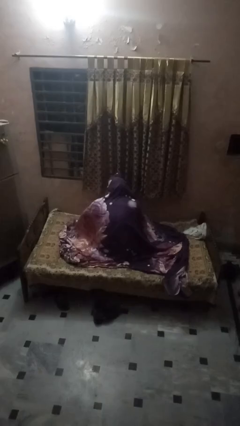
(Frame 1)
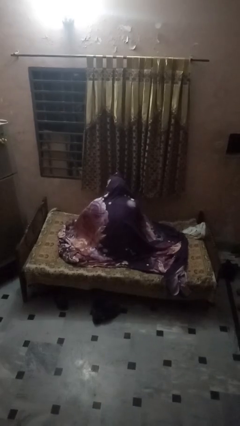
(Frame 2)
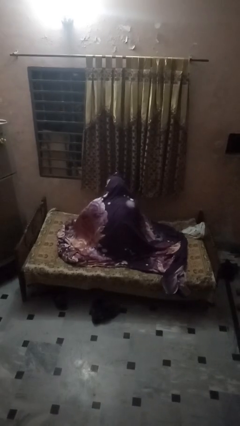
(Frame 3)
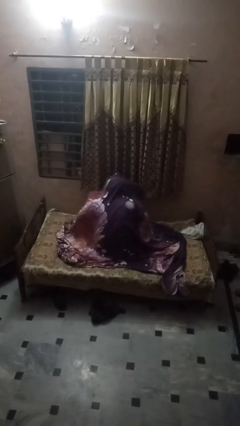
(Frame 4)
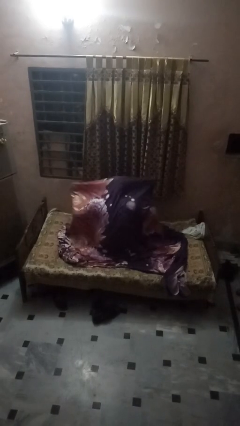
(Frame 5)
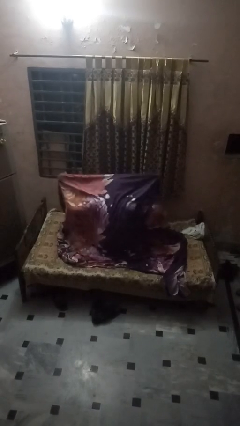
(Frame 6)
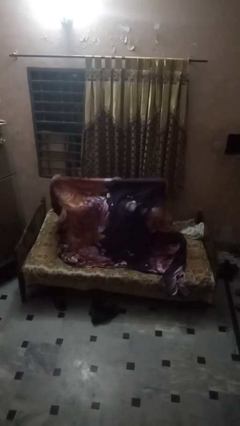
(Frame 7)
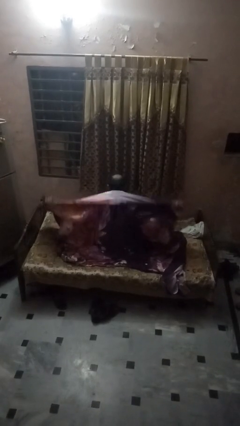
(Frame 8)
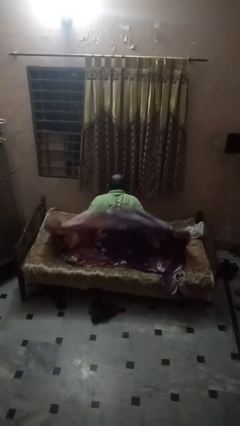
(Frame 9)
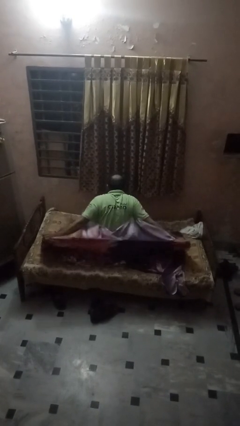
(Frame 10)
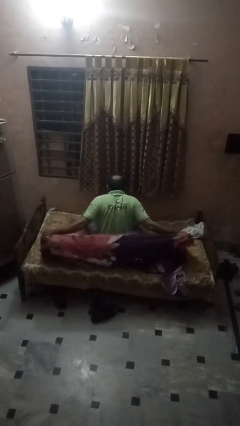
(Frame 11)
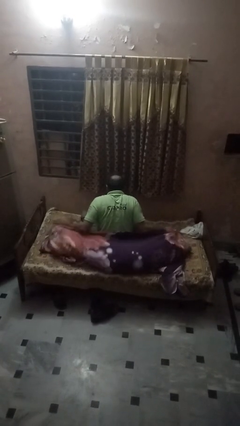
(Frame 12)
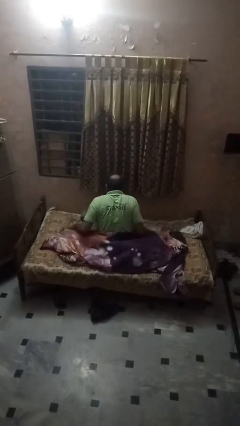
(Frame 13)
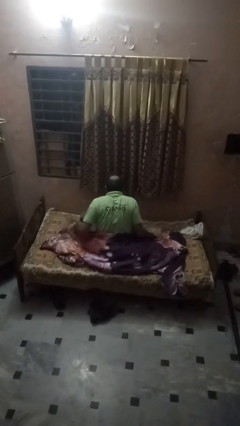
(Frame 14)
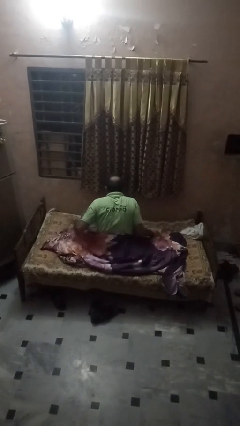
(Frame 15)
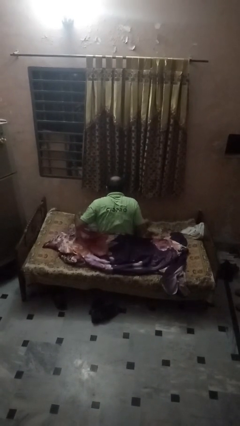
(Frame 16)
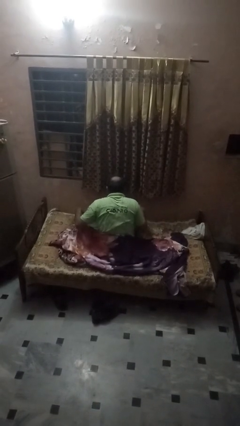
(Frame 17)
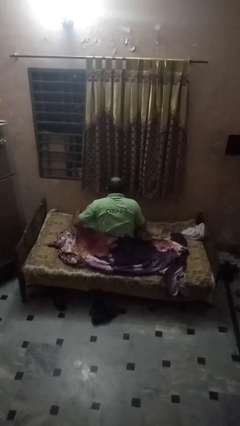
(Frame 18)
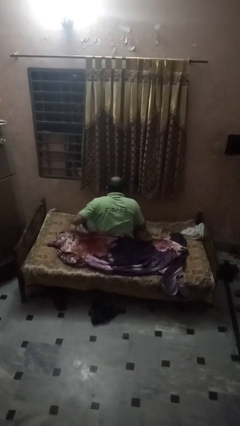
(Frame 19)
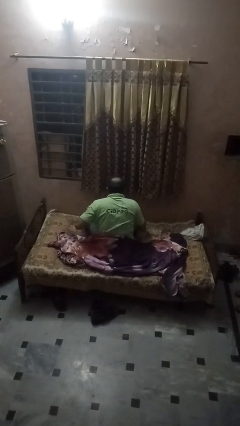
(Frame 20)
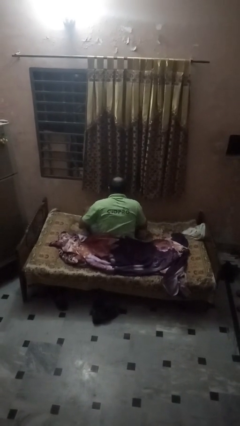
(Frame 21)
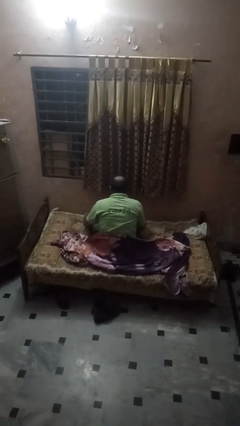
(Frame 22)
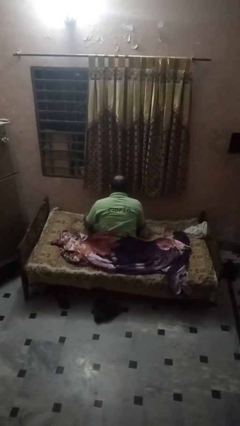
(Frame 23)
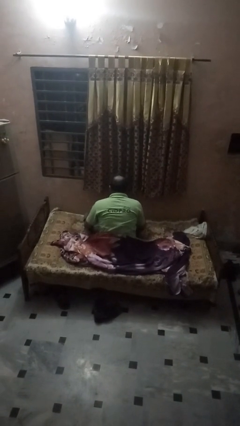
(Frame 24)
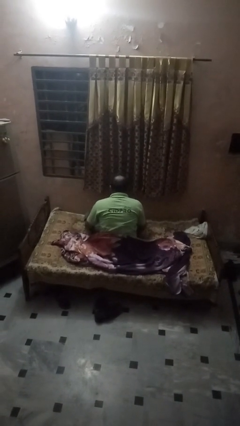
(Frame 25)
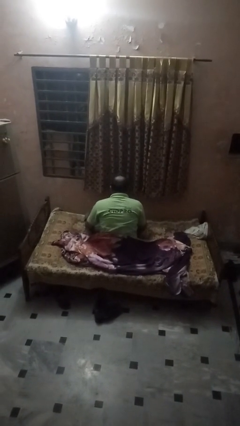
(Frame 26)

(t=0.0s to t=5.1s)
person uncovers with bedsheets

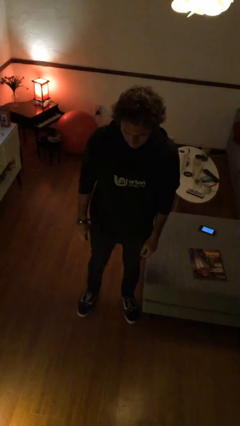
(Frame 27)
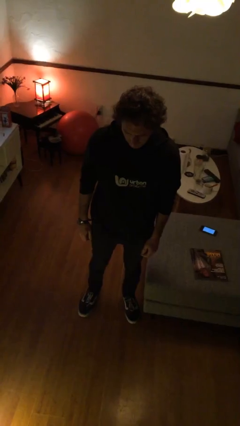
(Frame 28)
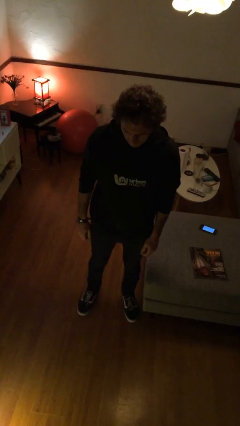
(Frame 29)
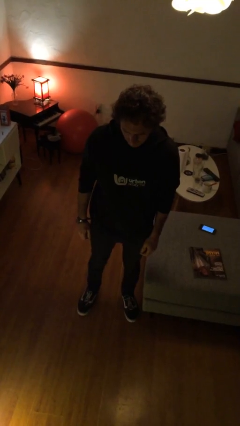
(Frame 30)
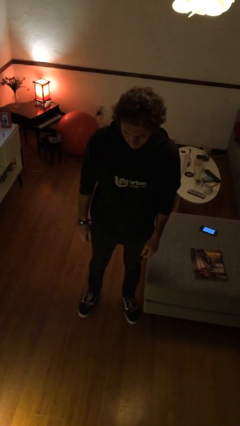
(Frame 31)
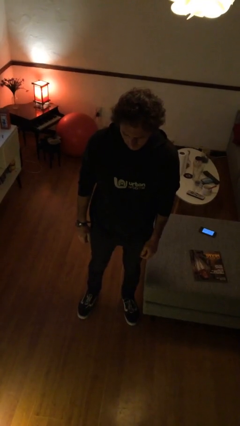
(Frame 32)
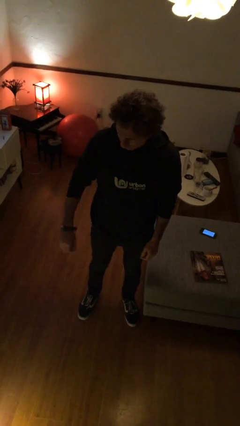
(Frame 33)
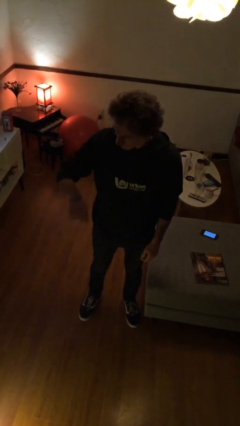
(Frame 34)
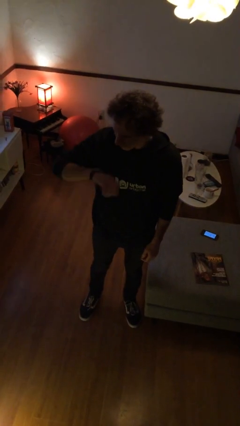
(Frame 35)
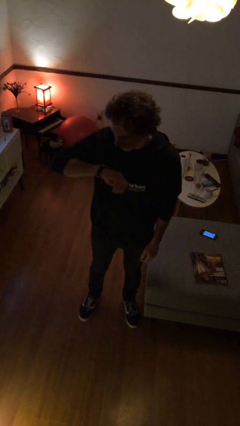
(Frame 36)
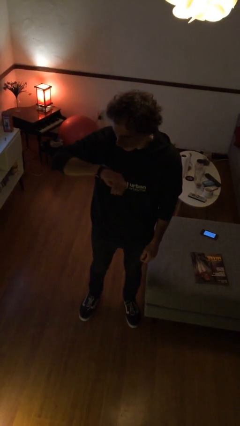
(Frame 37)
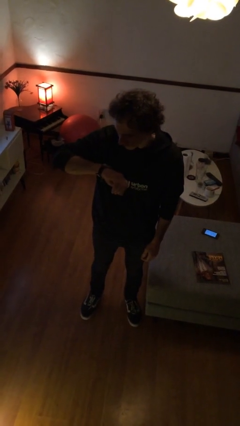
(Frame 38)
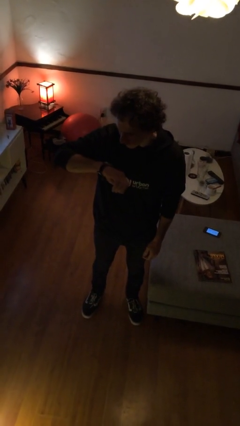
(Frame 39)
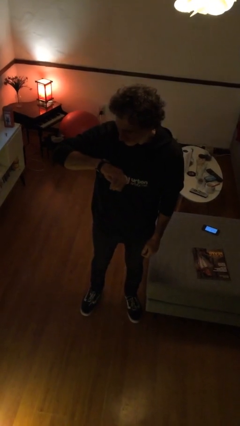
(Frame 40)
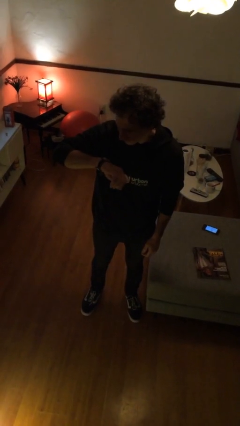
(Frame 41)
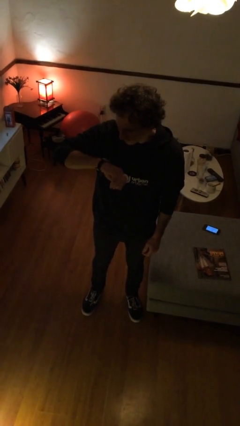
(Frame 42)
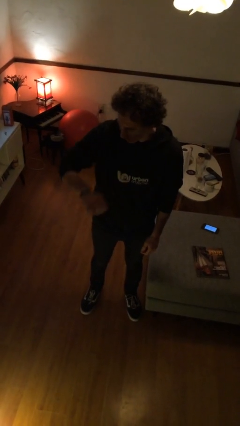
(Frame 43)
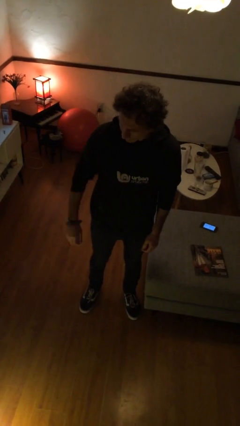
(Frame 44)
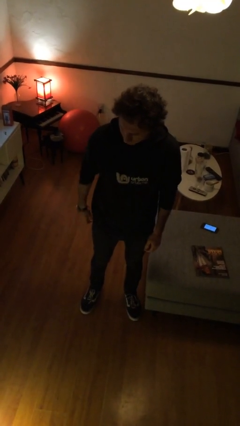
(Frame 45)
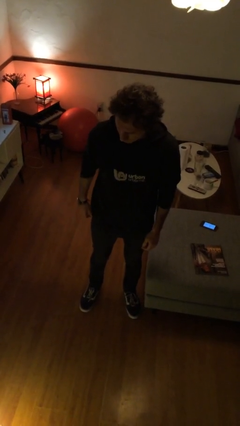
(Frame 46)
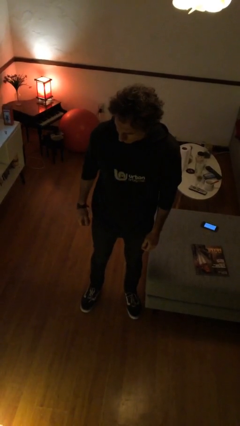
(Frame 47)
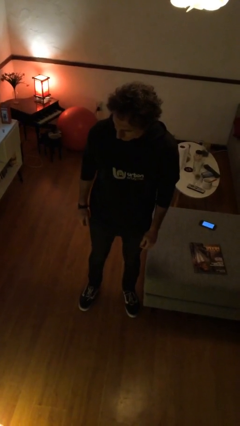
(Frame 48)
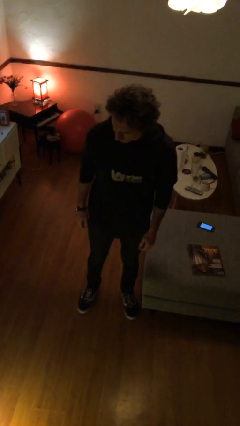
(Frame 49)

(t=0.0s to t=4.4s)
person looks at wristwatch

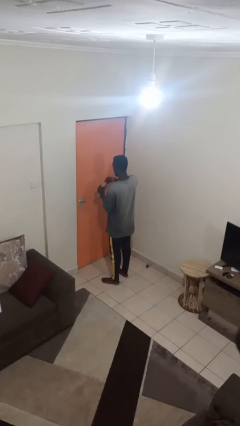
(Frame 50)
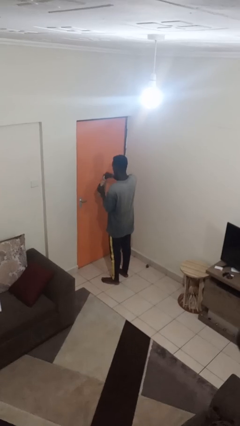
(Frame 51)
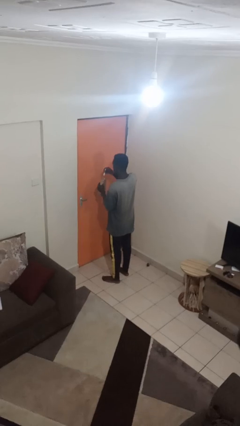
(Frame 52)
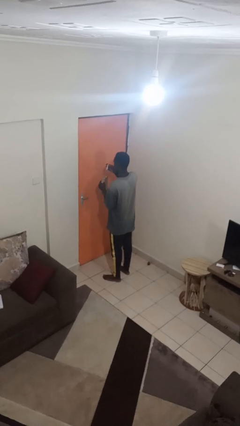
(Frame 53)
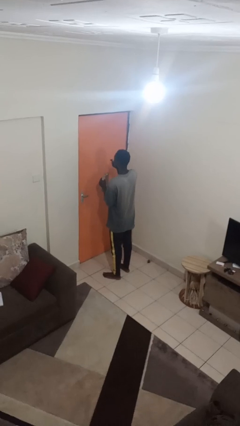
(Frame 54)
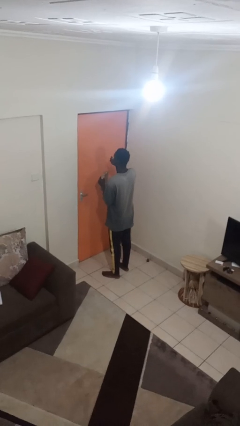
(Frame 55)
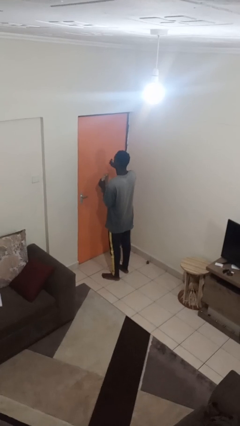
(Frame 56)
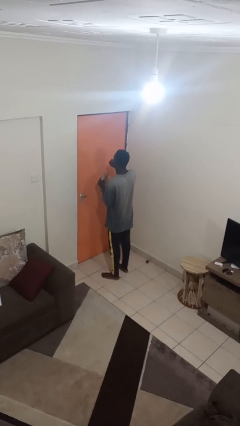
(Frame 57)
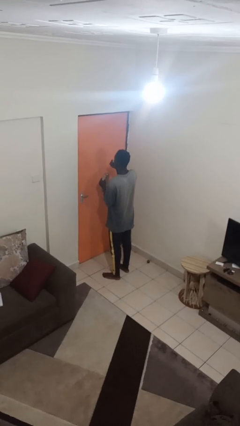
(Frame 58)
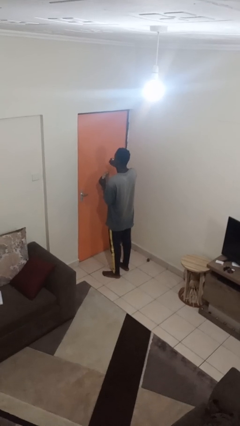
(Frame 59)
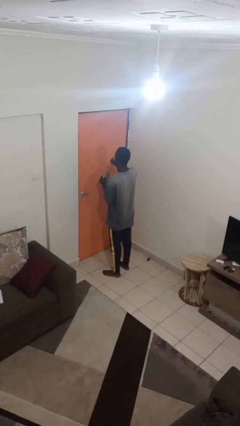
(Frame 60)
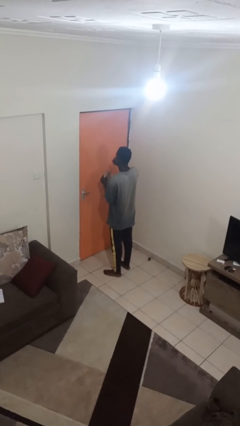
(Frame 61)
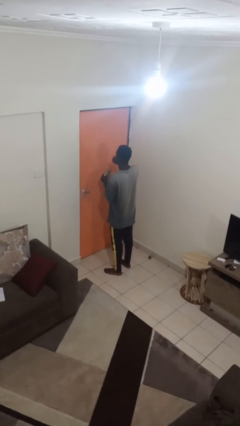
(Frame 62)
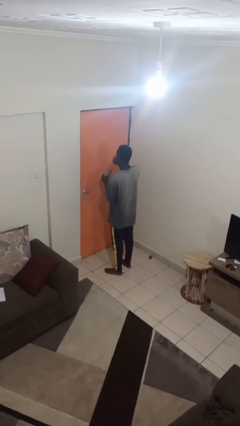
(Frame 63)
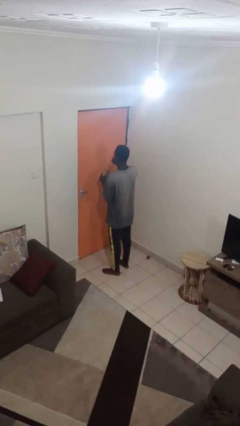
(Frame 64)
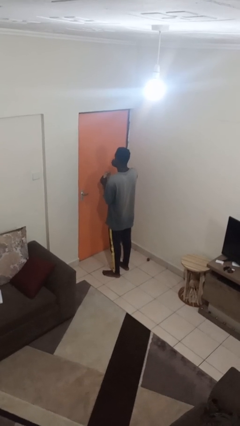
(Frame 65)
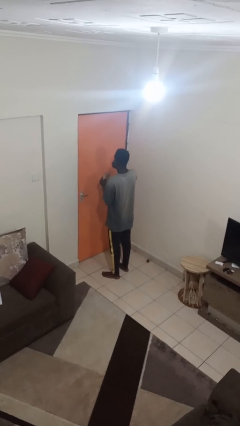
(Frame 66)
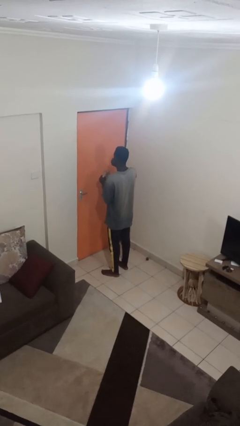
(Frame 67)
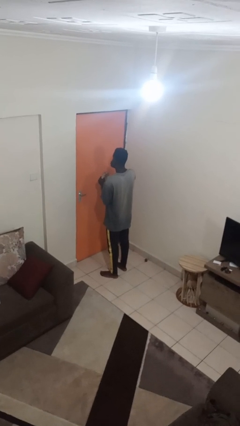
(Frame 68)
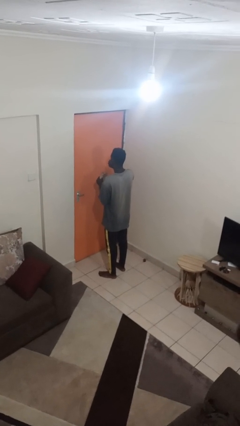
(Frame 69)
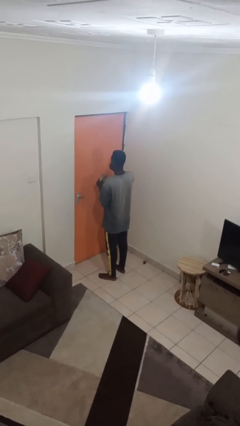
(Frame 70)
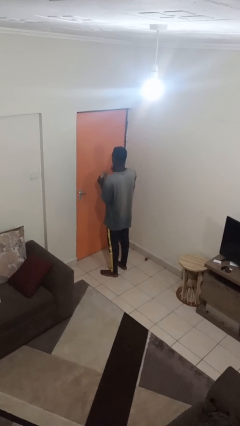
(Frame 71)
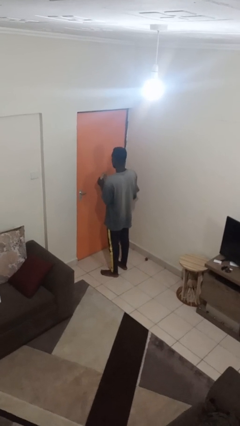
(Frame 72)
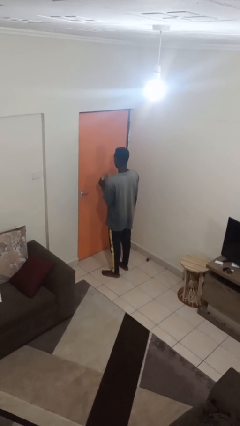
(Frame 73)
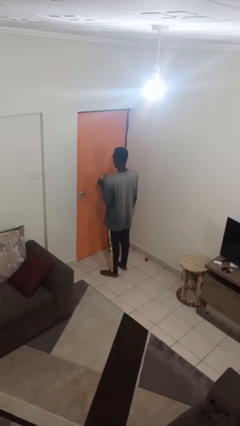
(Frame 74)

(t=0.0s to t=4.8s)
person eats snack from bag

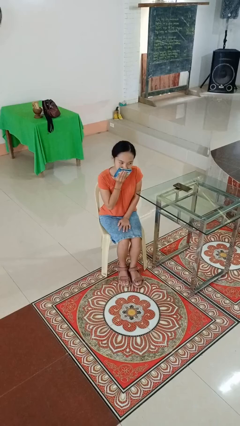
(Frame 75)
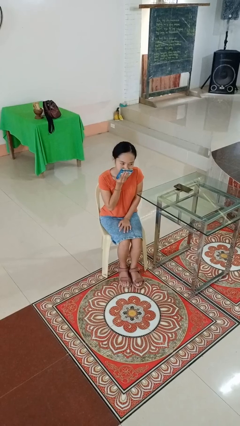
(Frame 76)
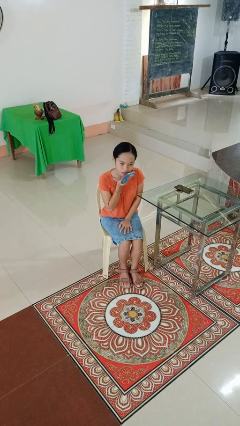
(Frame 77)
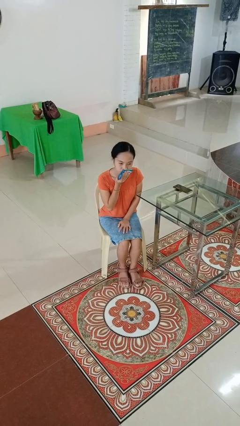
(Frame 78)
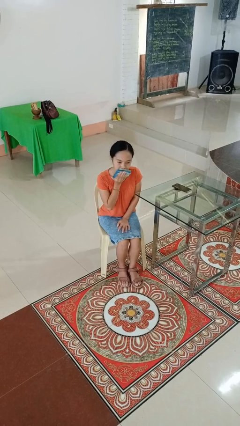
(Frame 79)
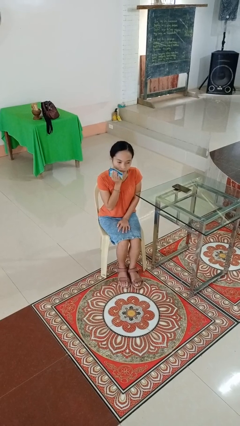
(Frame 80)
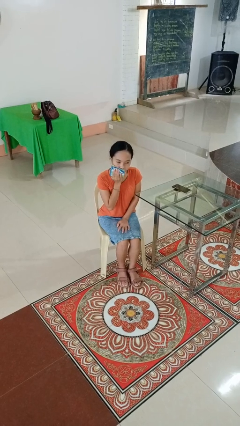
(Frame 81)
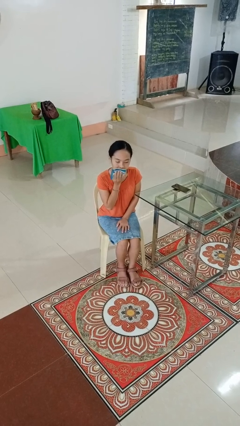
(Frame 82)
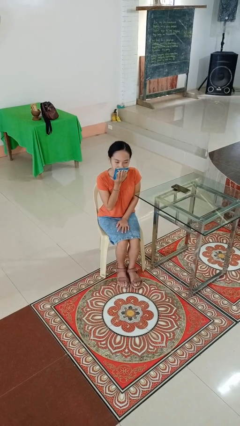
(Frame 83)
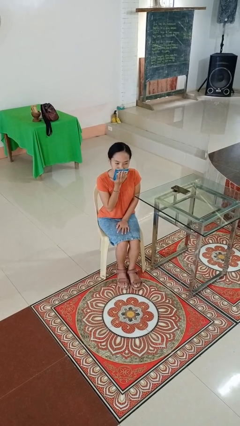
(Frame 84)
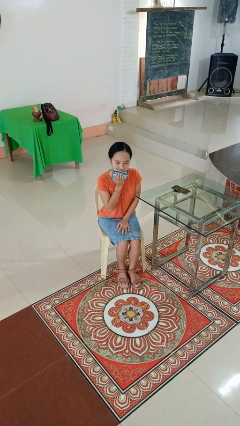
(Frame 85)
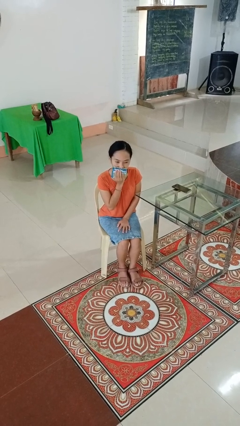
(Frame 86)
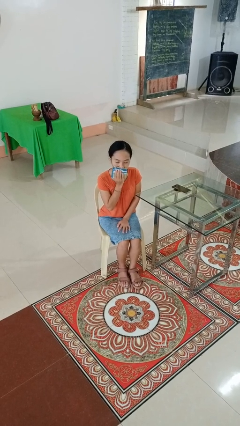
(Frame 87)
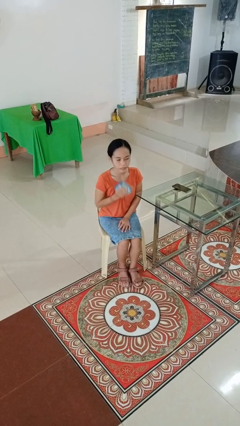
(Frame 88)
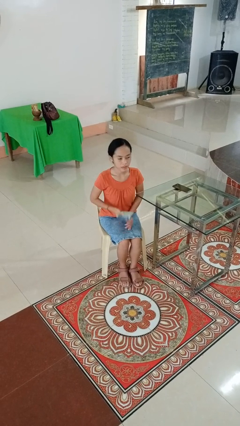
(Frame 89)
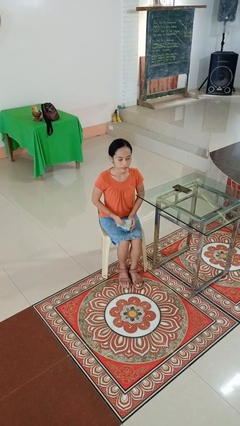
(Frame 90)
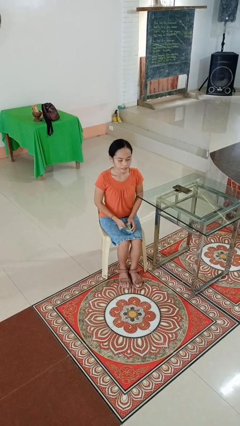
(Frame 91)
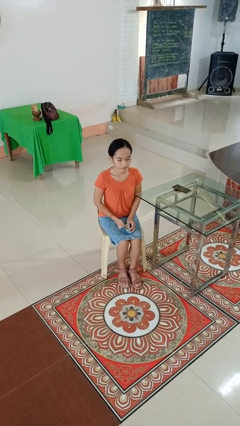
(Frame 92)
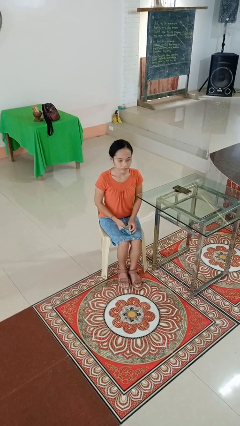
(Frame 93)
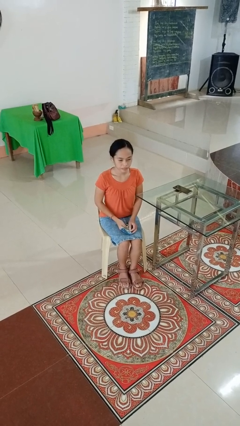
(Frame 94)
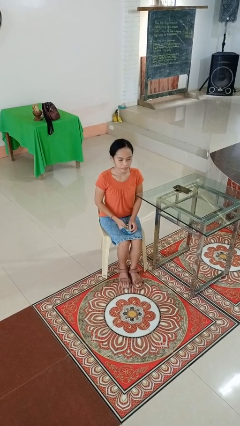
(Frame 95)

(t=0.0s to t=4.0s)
person wipes mouth with napkin
